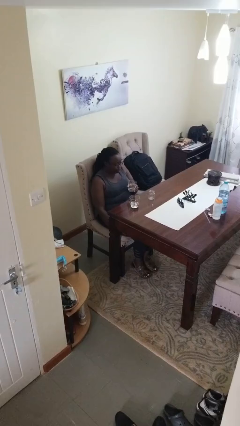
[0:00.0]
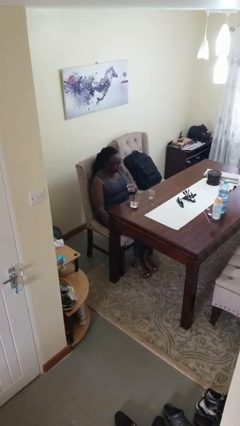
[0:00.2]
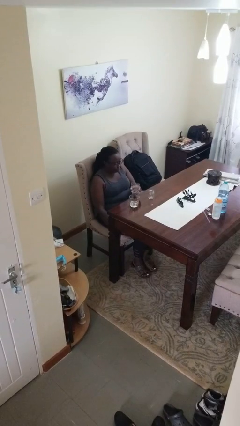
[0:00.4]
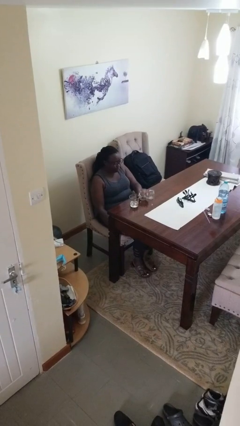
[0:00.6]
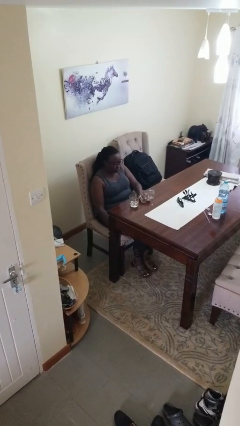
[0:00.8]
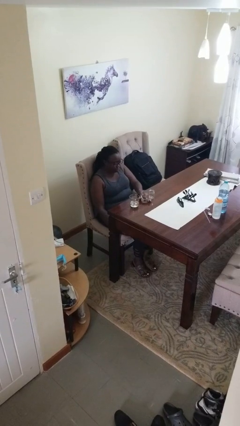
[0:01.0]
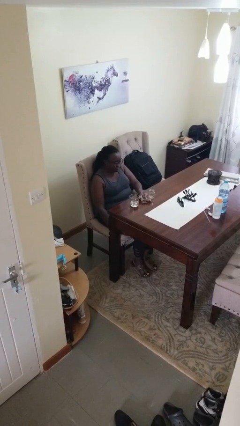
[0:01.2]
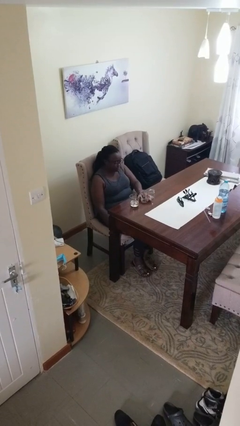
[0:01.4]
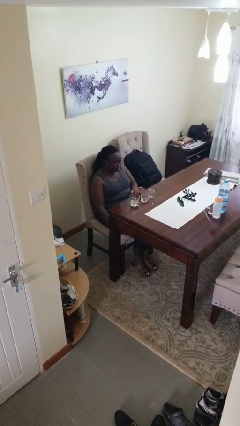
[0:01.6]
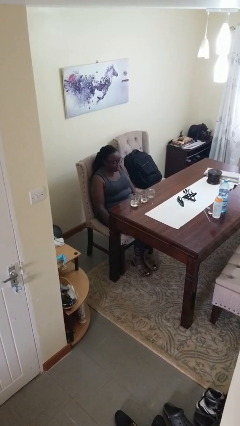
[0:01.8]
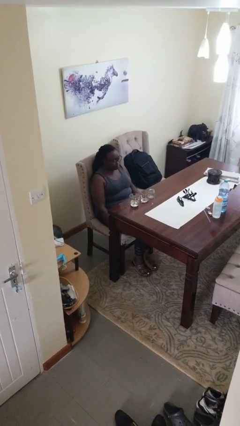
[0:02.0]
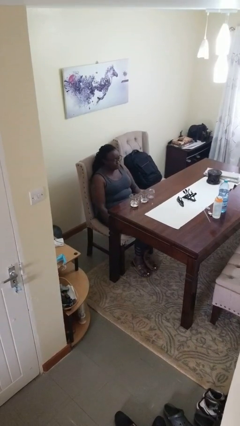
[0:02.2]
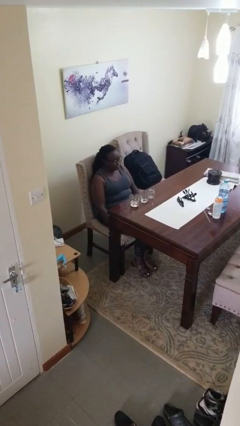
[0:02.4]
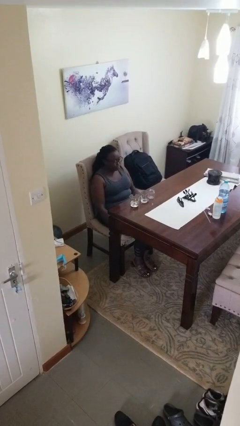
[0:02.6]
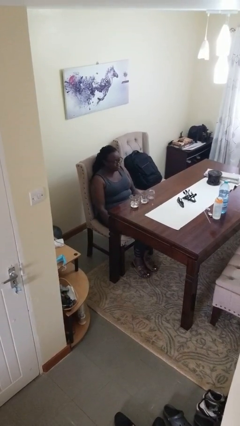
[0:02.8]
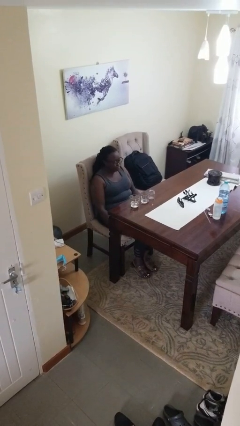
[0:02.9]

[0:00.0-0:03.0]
person puts down object on table

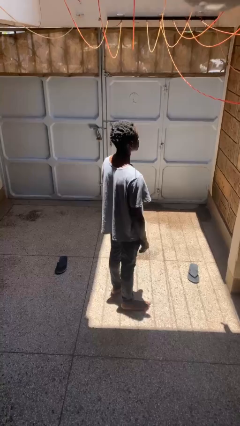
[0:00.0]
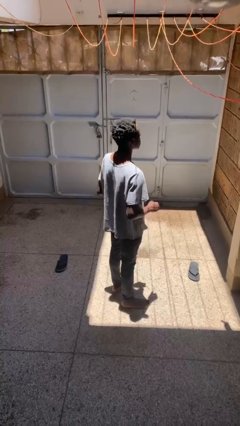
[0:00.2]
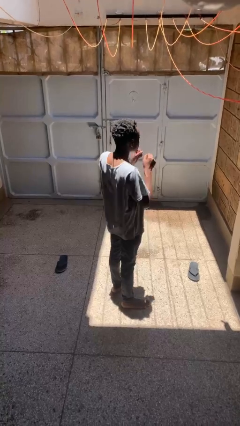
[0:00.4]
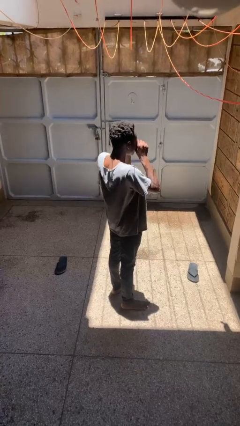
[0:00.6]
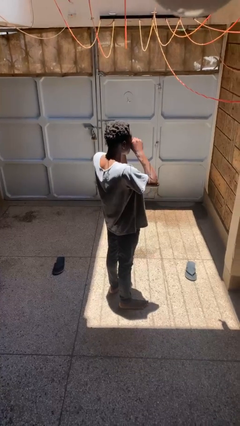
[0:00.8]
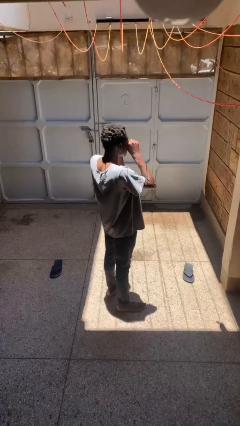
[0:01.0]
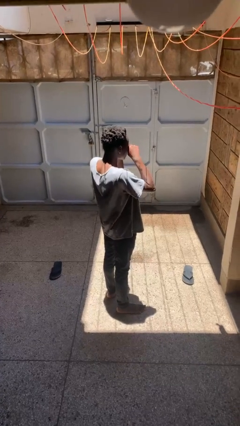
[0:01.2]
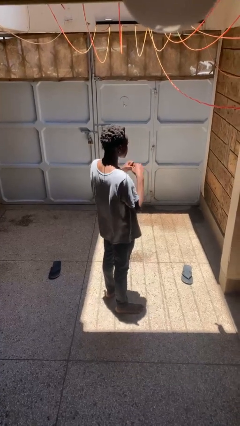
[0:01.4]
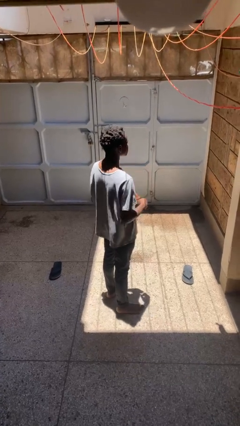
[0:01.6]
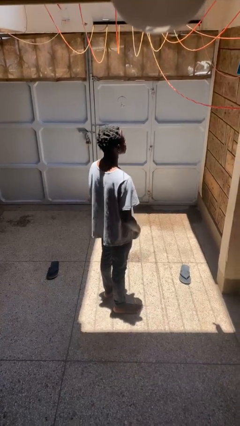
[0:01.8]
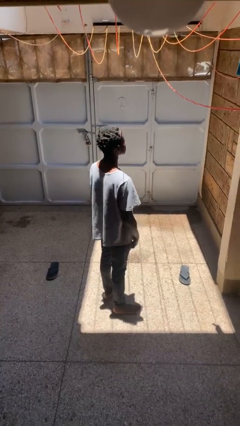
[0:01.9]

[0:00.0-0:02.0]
person rubs eyes

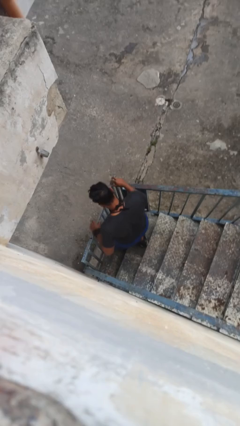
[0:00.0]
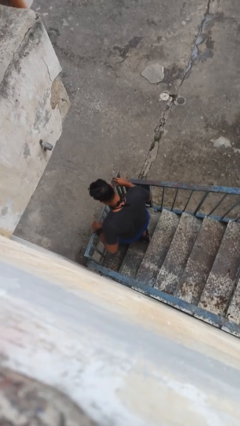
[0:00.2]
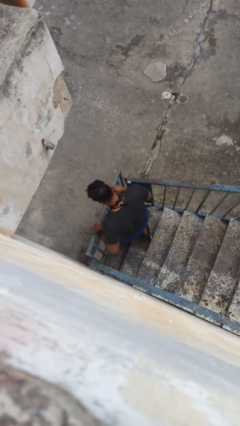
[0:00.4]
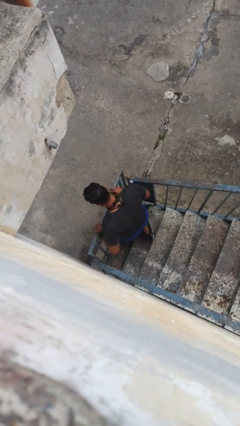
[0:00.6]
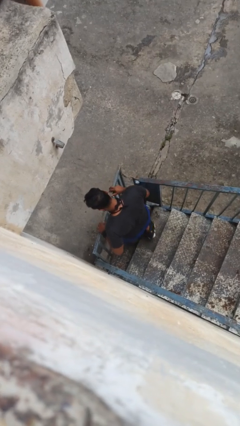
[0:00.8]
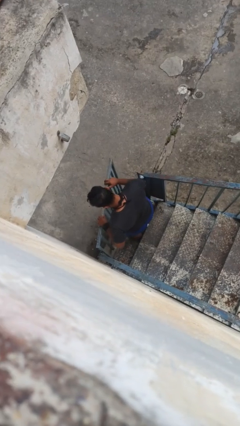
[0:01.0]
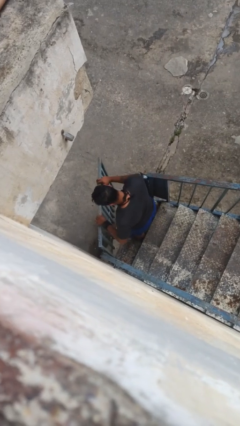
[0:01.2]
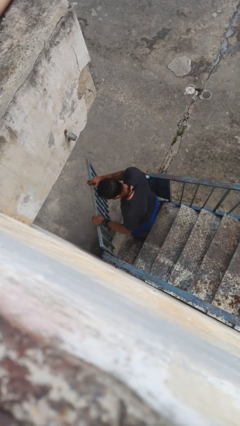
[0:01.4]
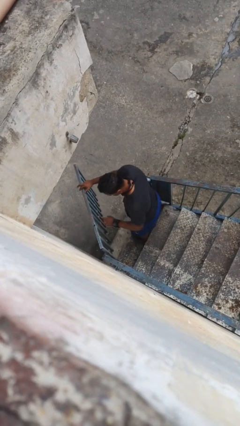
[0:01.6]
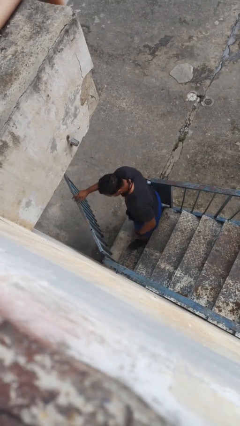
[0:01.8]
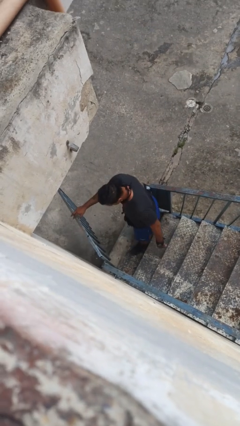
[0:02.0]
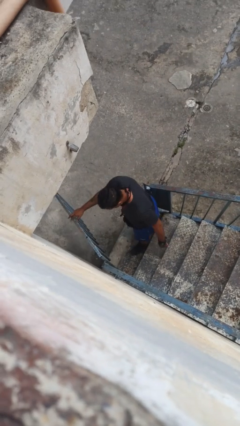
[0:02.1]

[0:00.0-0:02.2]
person opens facility door

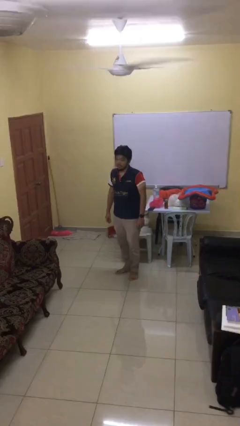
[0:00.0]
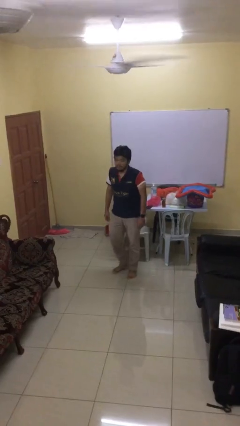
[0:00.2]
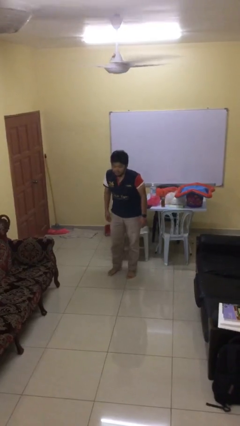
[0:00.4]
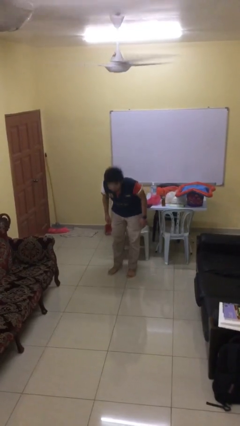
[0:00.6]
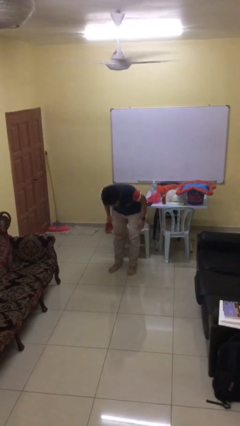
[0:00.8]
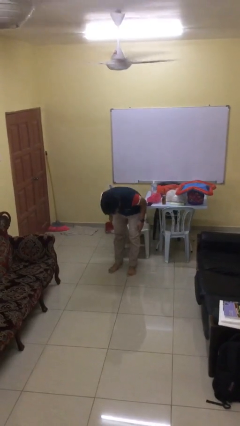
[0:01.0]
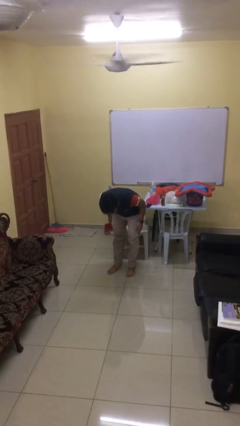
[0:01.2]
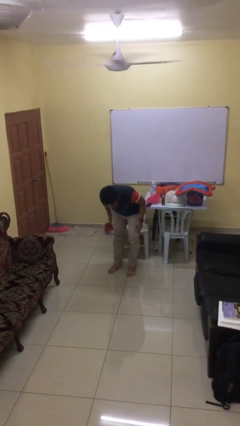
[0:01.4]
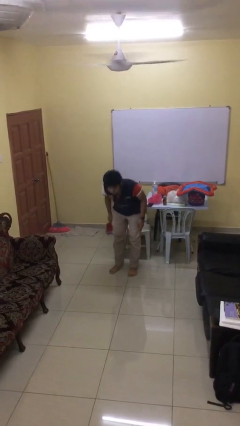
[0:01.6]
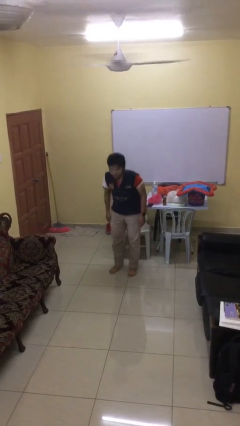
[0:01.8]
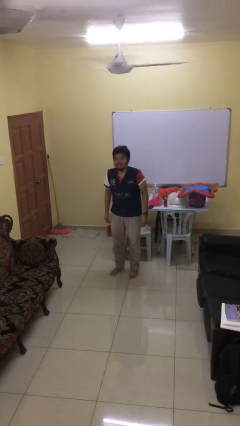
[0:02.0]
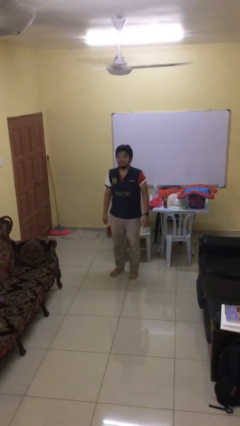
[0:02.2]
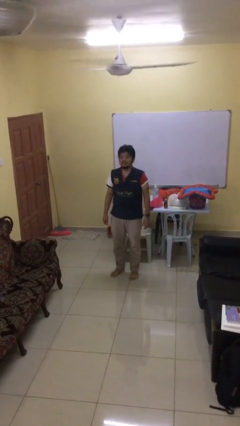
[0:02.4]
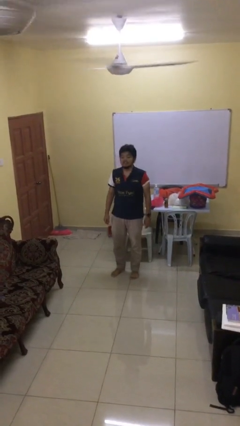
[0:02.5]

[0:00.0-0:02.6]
person bows

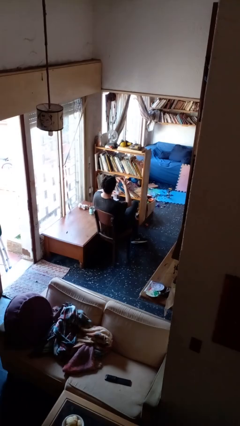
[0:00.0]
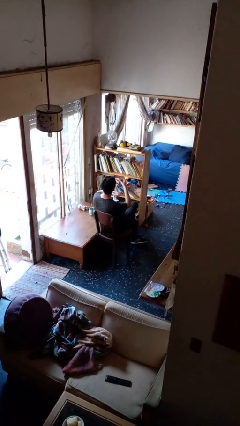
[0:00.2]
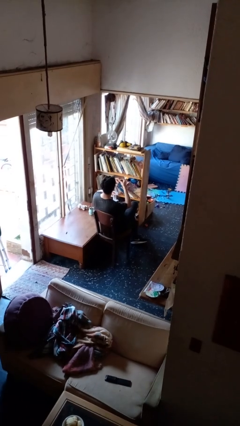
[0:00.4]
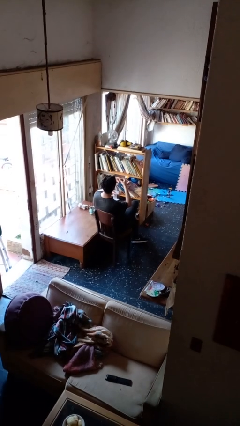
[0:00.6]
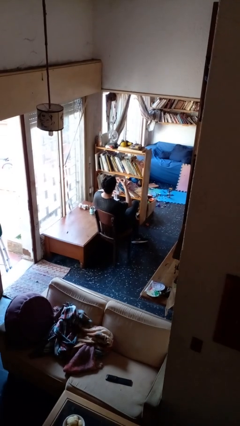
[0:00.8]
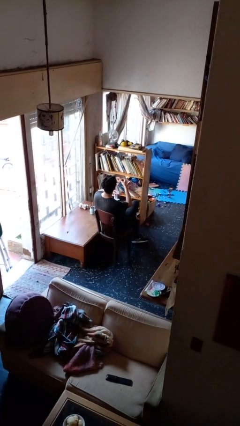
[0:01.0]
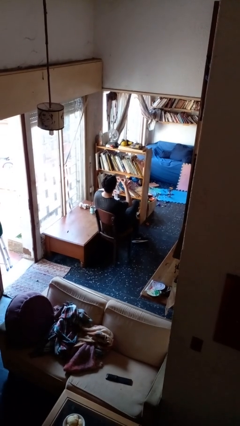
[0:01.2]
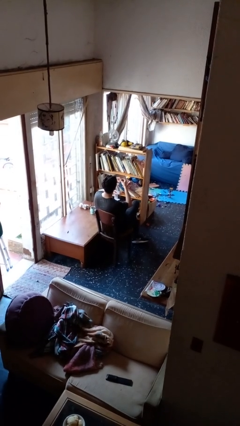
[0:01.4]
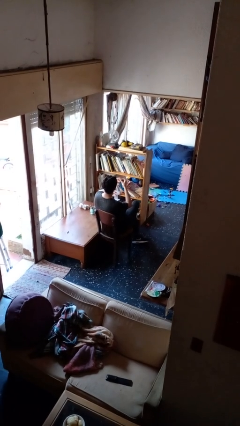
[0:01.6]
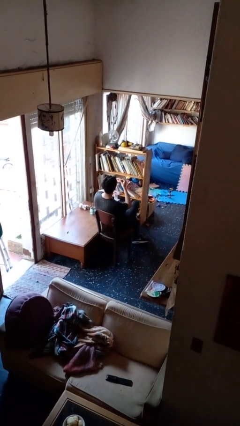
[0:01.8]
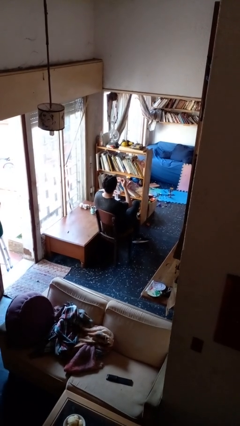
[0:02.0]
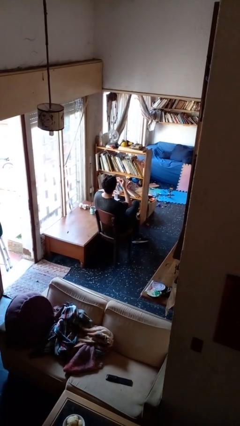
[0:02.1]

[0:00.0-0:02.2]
person files fingernails

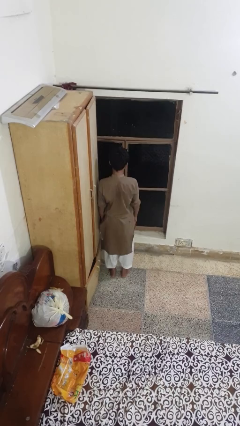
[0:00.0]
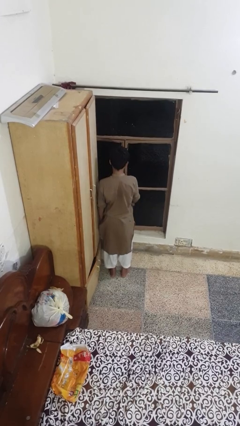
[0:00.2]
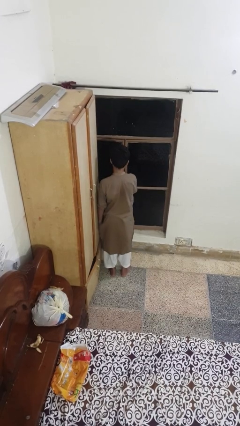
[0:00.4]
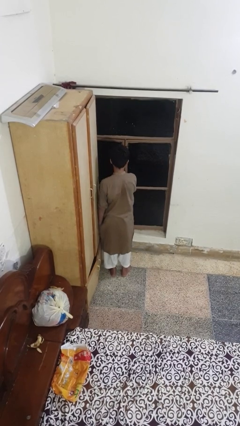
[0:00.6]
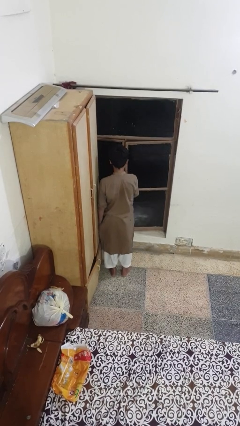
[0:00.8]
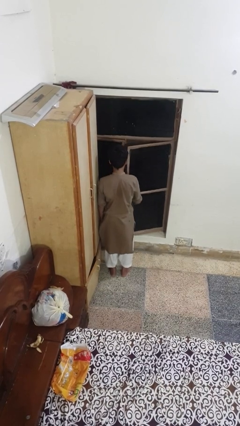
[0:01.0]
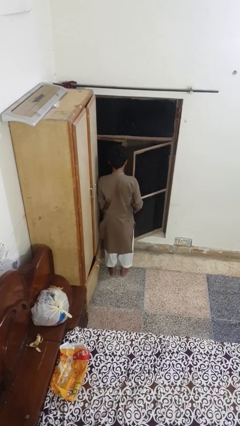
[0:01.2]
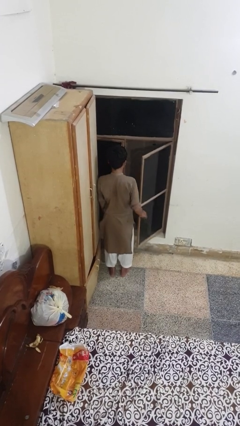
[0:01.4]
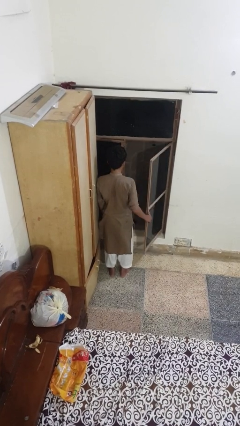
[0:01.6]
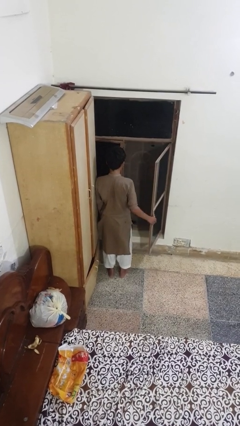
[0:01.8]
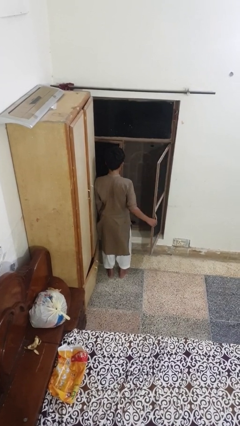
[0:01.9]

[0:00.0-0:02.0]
person opens home window

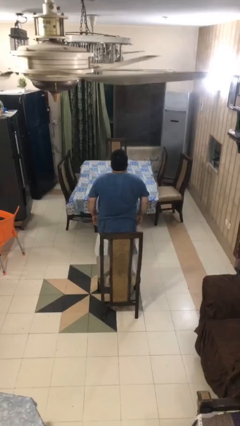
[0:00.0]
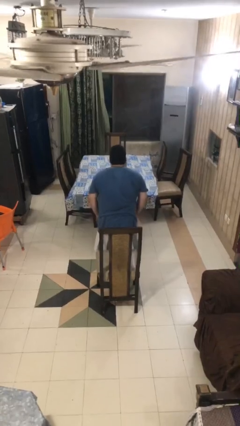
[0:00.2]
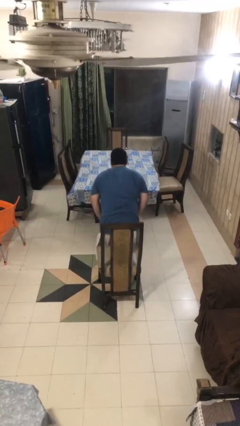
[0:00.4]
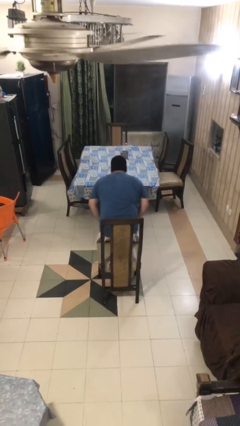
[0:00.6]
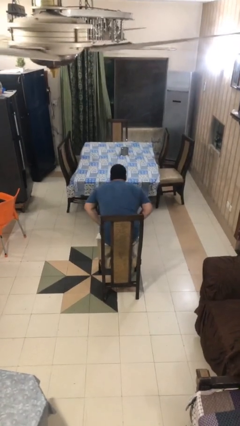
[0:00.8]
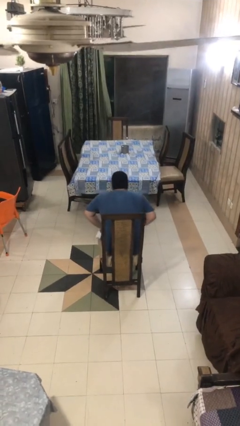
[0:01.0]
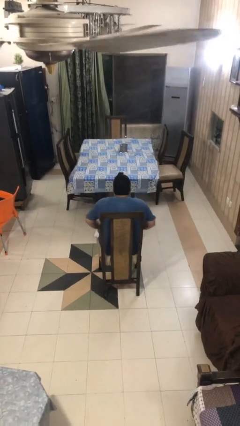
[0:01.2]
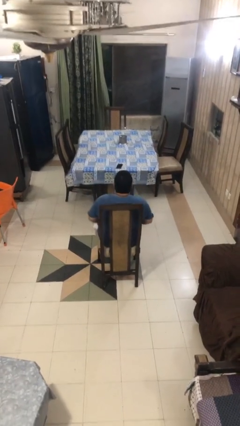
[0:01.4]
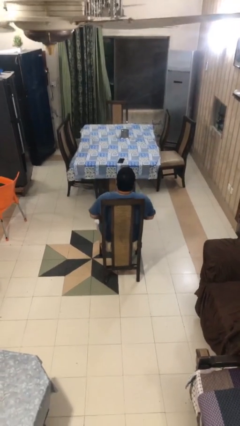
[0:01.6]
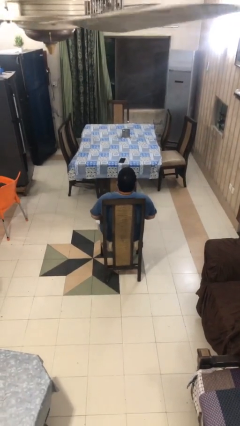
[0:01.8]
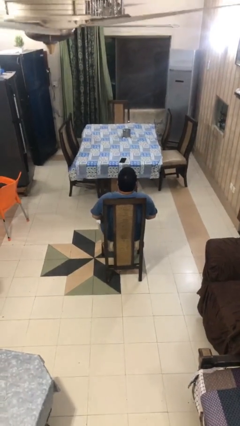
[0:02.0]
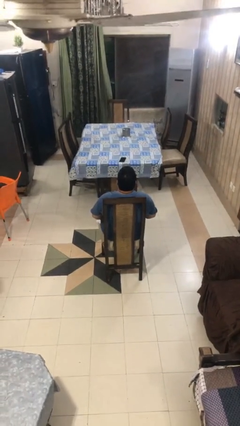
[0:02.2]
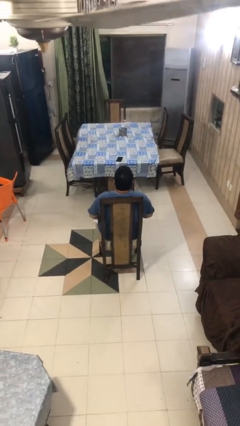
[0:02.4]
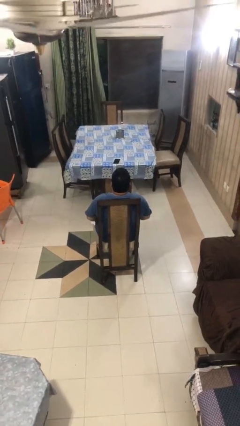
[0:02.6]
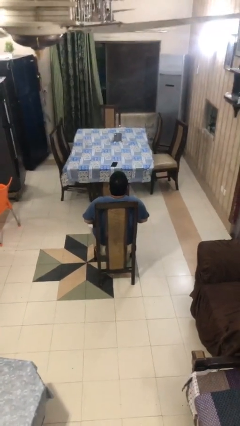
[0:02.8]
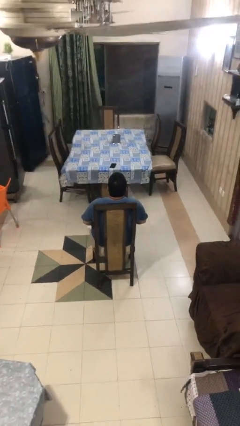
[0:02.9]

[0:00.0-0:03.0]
person sits down
